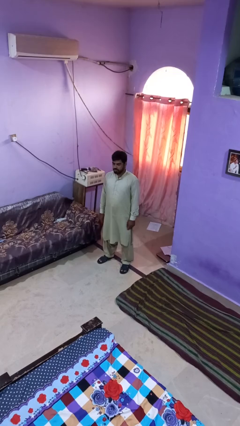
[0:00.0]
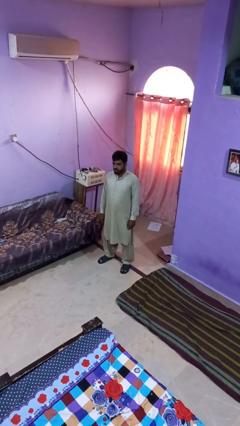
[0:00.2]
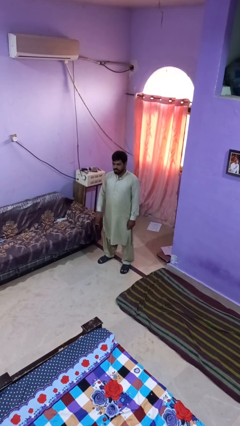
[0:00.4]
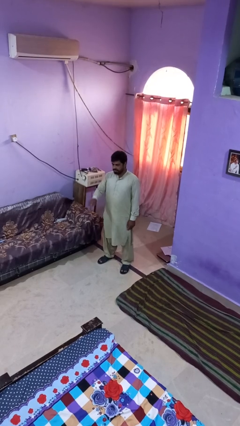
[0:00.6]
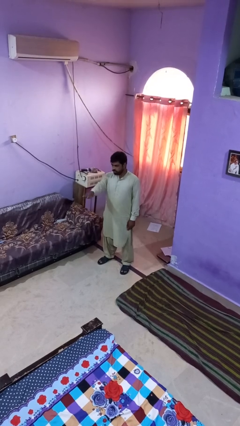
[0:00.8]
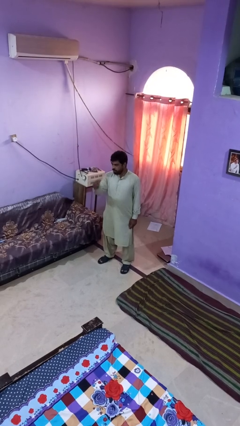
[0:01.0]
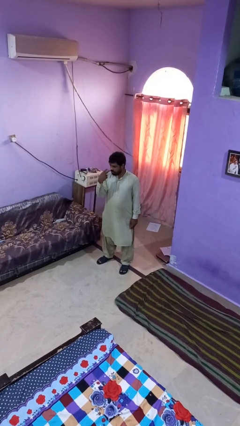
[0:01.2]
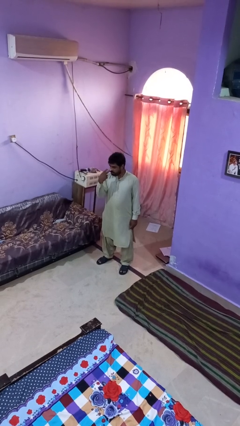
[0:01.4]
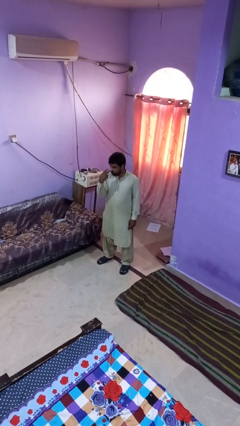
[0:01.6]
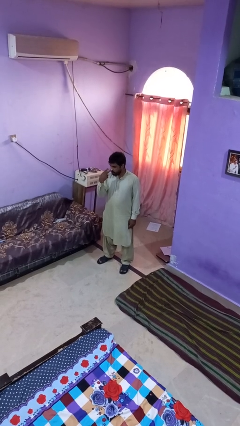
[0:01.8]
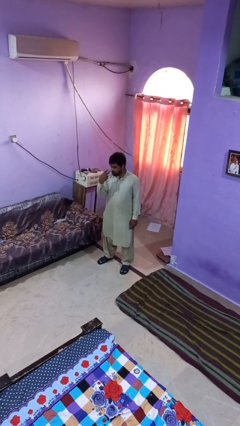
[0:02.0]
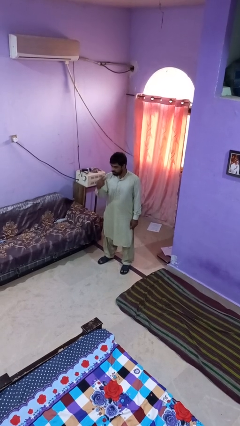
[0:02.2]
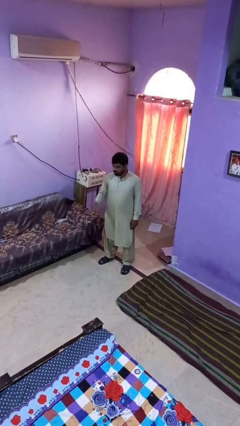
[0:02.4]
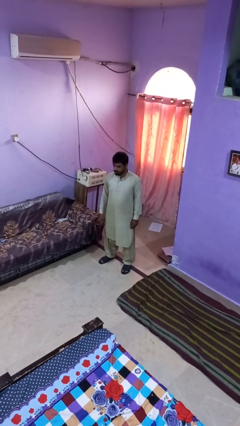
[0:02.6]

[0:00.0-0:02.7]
person gestures watch closely

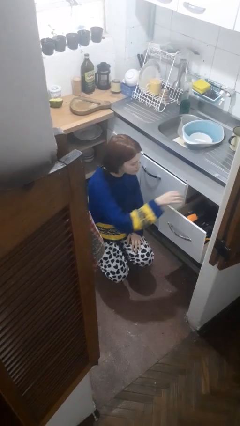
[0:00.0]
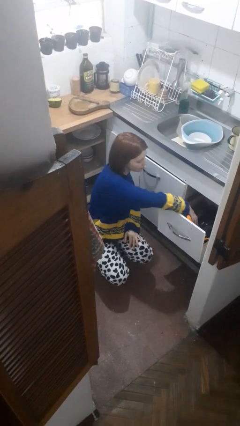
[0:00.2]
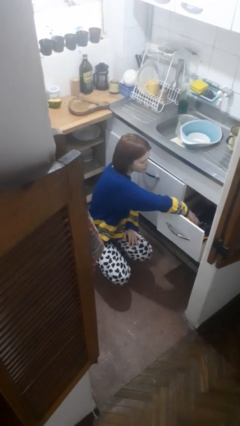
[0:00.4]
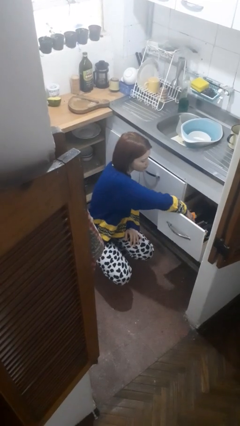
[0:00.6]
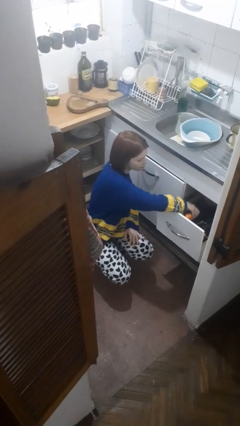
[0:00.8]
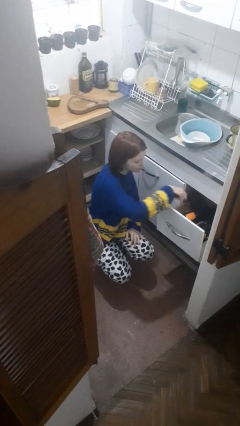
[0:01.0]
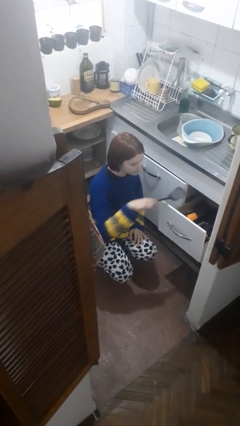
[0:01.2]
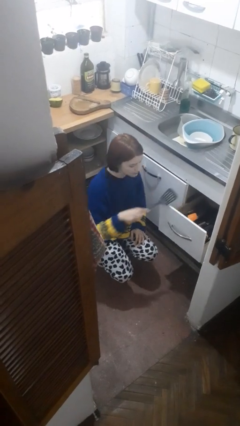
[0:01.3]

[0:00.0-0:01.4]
person takes object from kitchen drawer

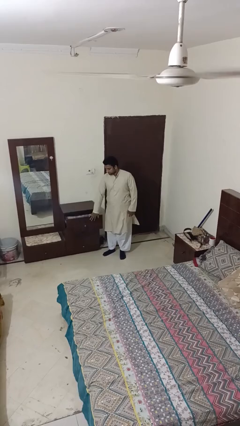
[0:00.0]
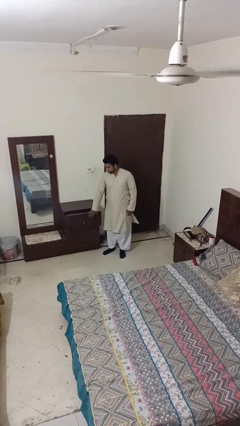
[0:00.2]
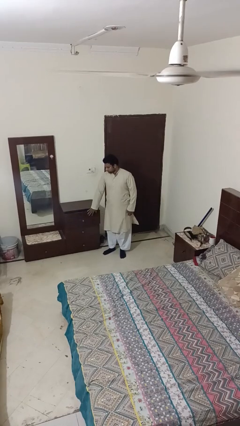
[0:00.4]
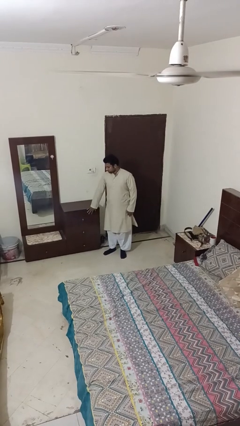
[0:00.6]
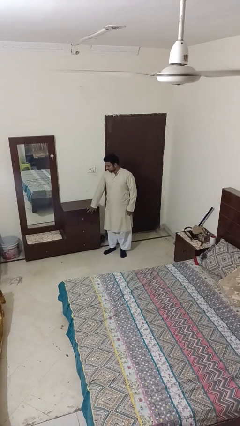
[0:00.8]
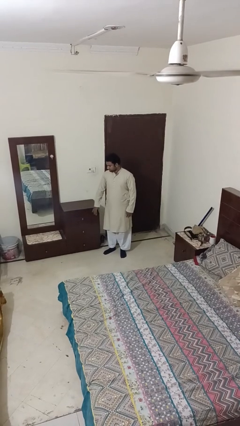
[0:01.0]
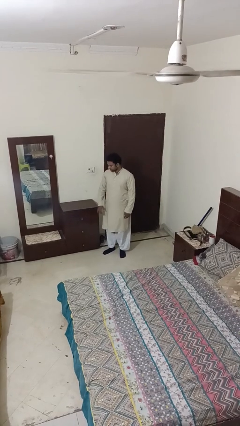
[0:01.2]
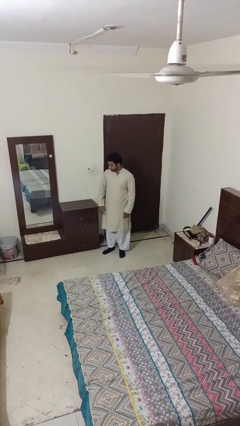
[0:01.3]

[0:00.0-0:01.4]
person closes dresser drawer

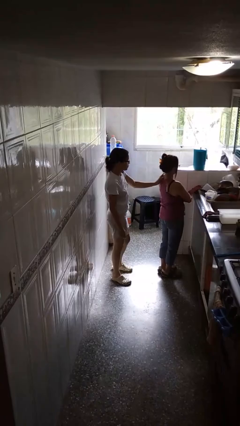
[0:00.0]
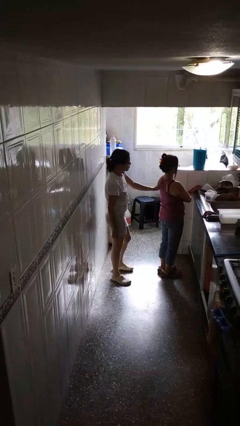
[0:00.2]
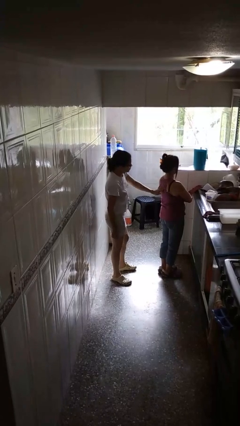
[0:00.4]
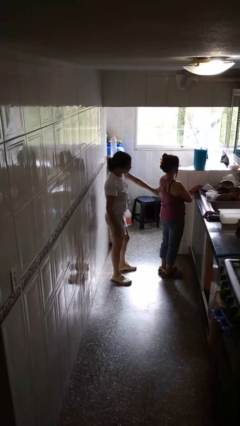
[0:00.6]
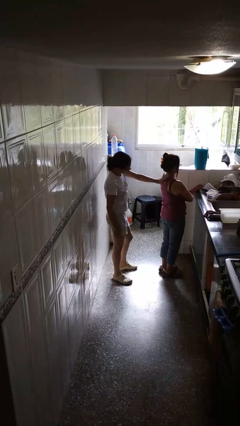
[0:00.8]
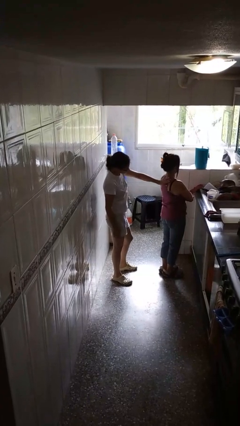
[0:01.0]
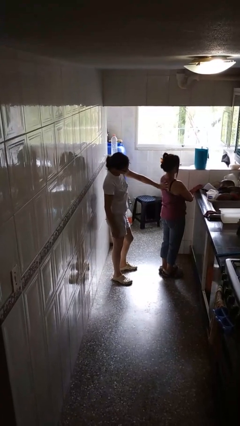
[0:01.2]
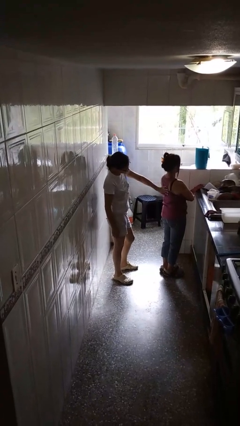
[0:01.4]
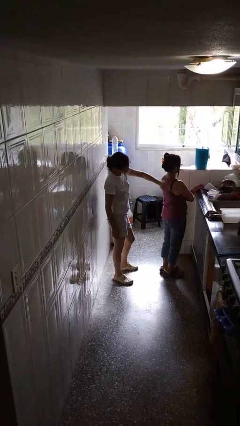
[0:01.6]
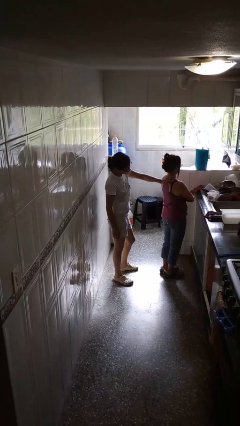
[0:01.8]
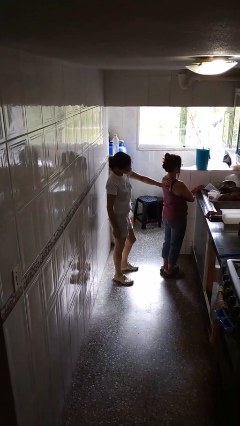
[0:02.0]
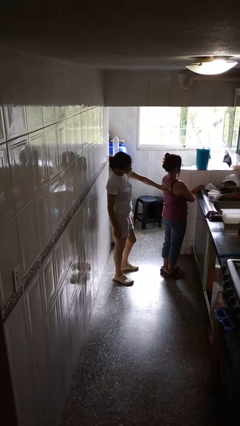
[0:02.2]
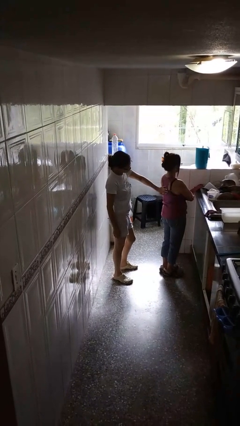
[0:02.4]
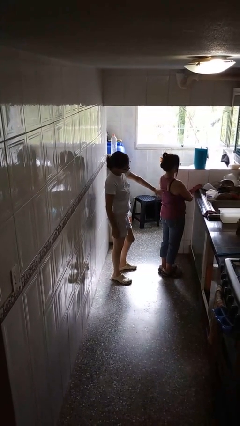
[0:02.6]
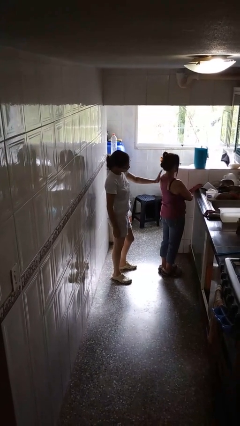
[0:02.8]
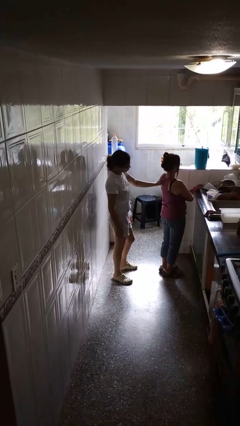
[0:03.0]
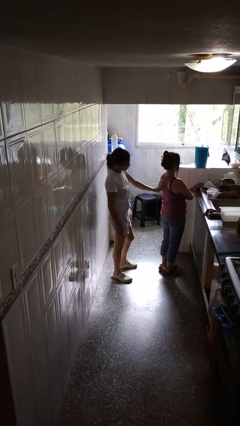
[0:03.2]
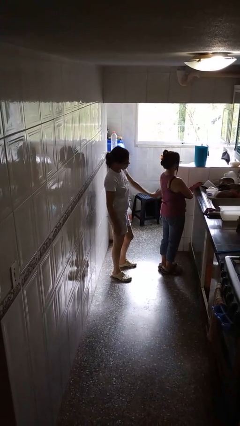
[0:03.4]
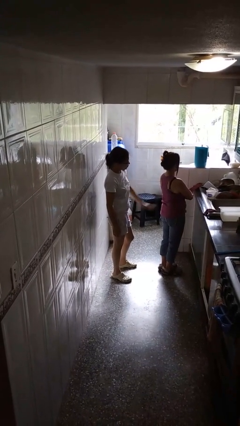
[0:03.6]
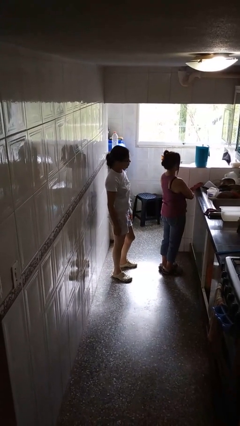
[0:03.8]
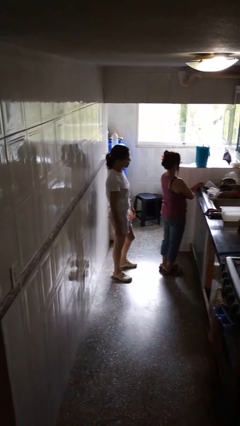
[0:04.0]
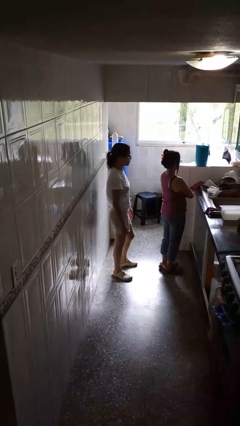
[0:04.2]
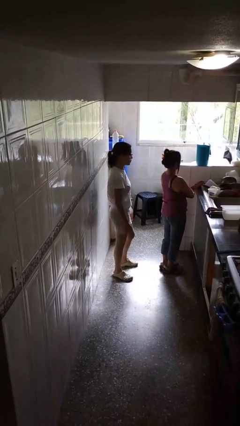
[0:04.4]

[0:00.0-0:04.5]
person touches back of person

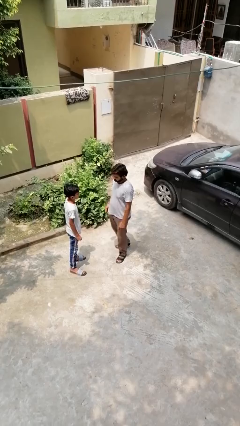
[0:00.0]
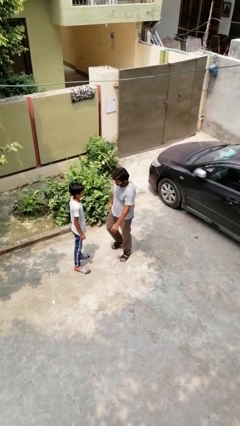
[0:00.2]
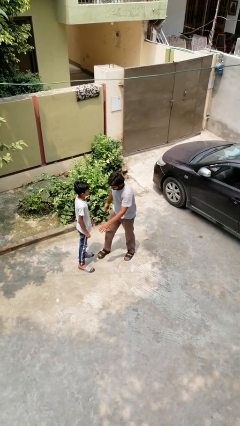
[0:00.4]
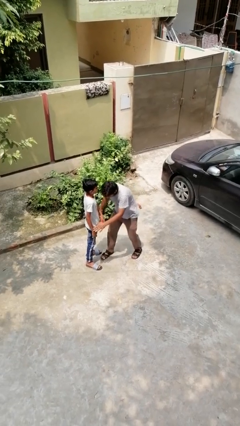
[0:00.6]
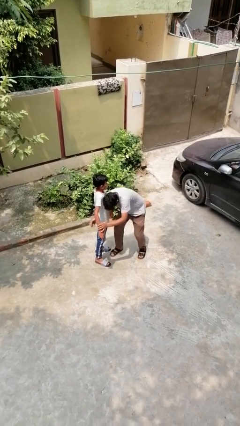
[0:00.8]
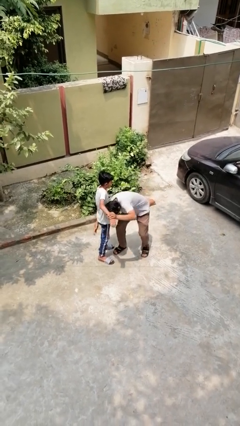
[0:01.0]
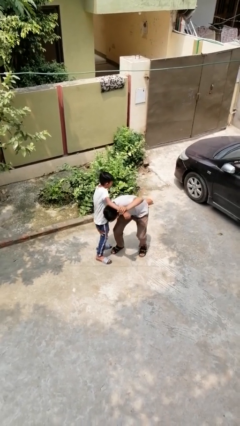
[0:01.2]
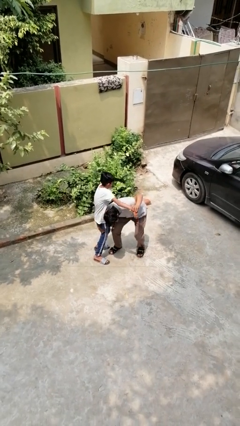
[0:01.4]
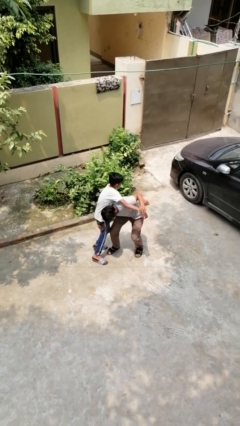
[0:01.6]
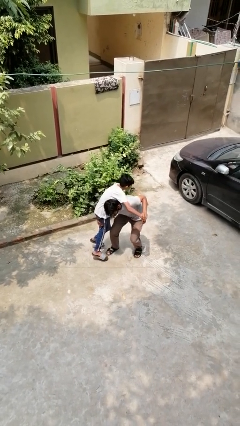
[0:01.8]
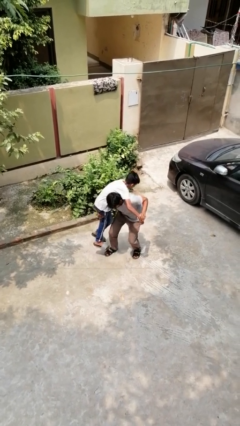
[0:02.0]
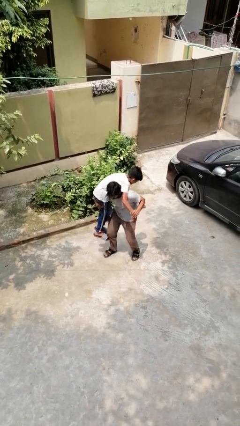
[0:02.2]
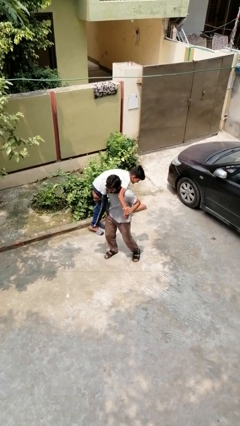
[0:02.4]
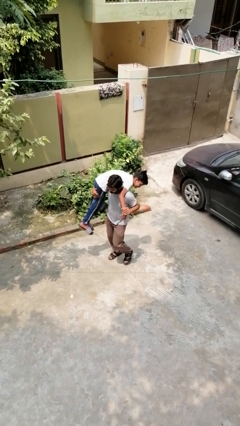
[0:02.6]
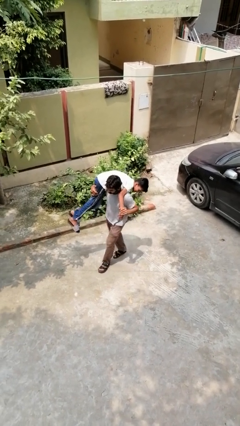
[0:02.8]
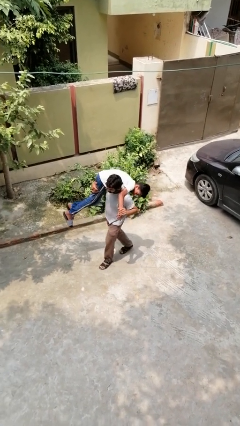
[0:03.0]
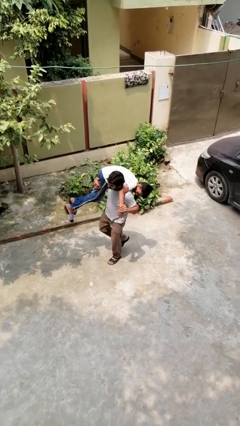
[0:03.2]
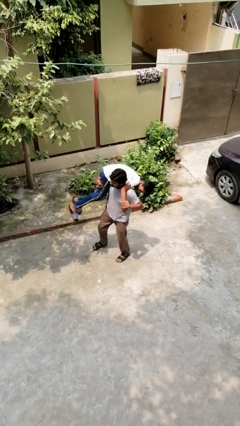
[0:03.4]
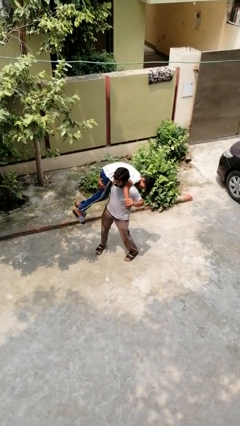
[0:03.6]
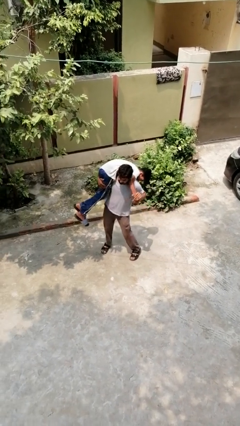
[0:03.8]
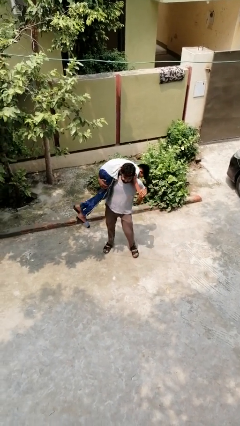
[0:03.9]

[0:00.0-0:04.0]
person carries person over shoulder

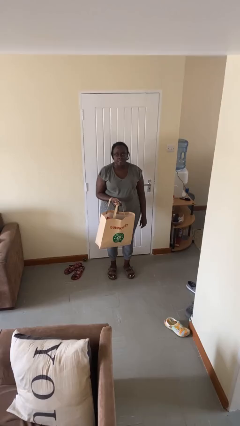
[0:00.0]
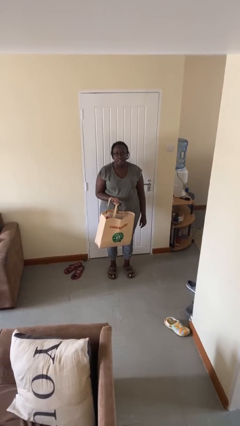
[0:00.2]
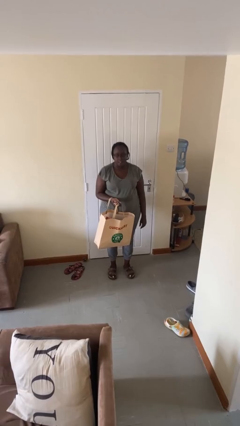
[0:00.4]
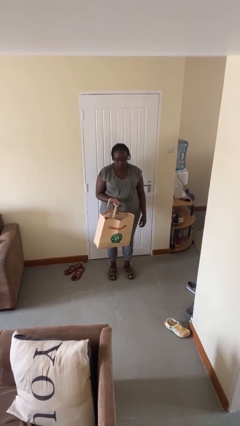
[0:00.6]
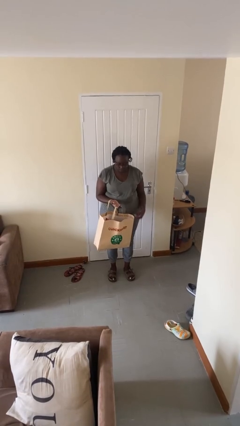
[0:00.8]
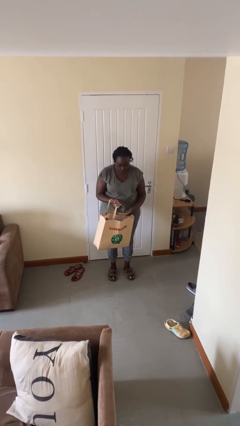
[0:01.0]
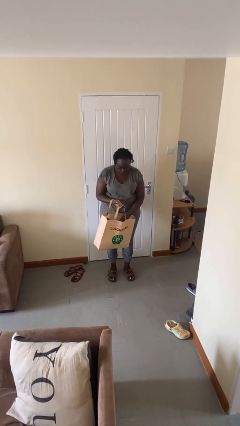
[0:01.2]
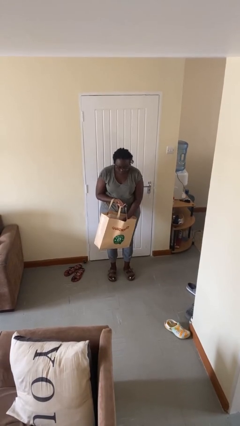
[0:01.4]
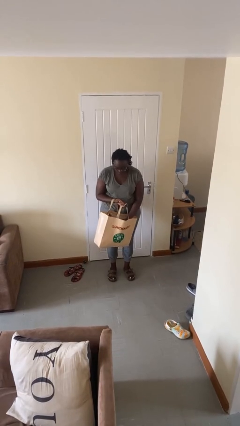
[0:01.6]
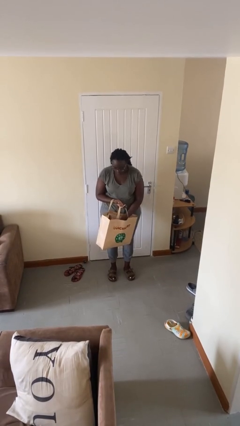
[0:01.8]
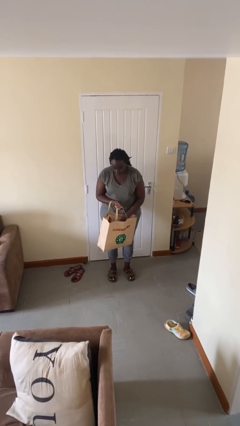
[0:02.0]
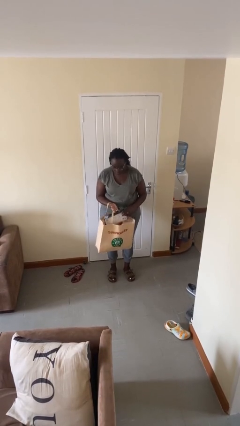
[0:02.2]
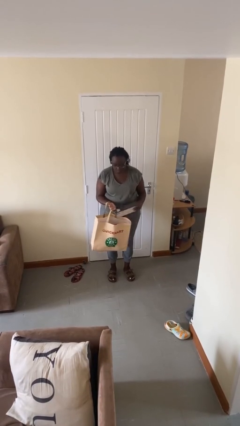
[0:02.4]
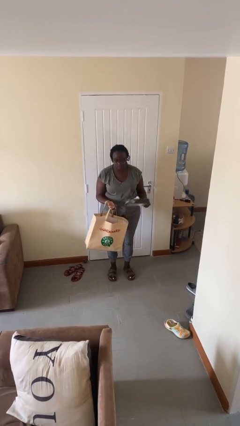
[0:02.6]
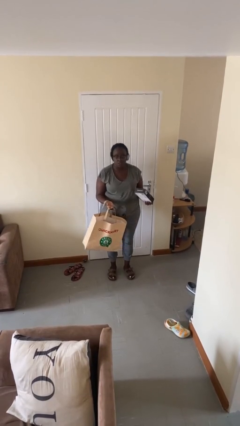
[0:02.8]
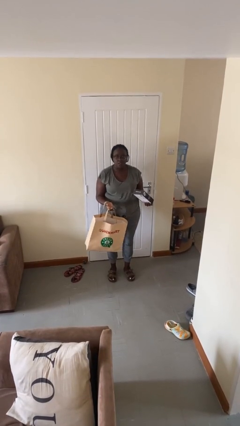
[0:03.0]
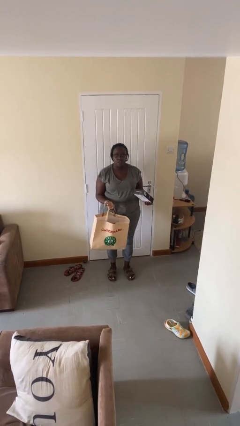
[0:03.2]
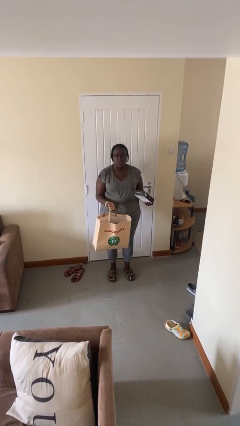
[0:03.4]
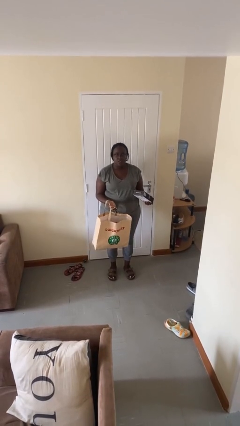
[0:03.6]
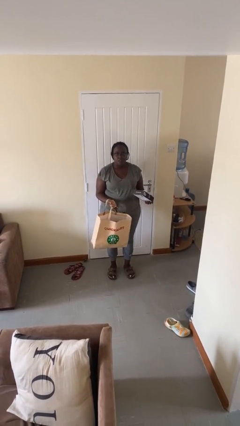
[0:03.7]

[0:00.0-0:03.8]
person takes object from bag
